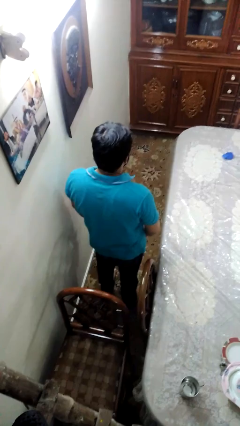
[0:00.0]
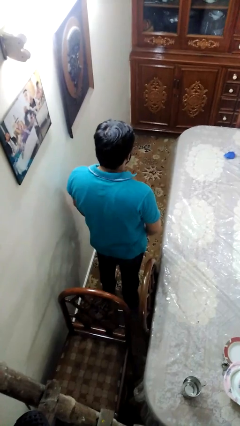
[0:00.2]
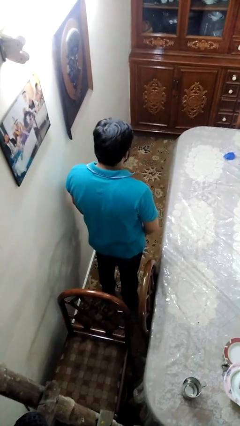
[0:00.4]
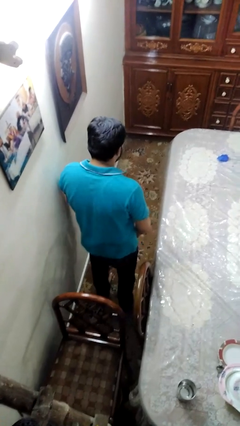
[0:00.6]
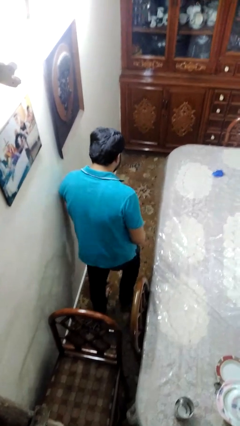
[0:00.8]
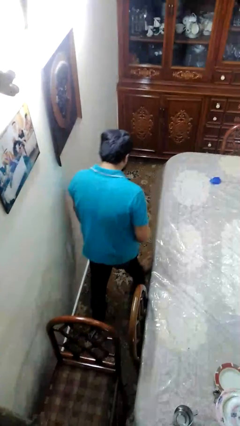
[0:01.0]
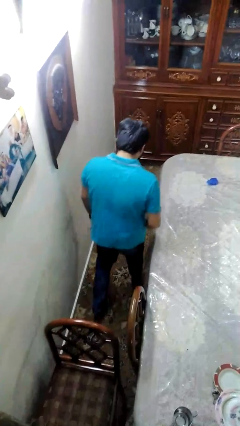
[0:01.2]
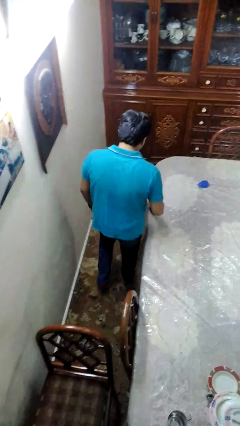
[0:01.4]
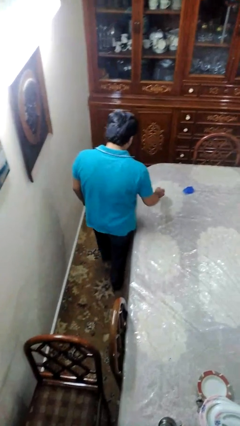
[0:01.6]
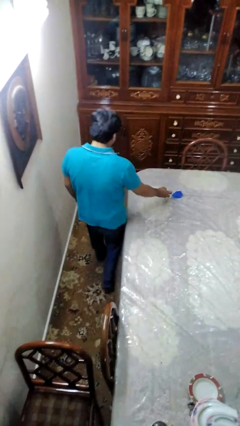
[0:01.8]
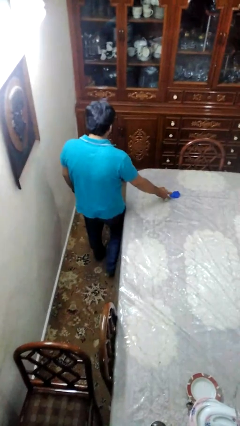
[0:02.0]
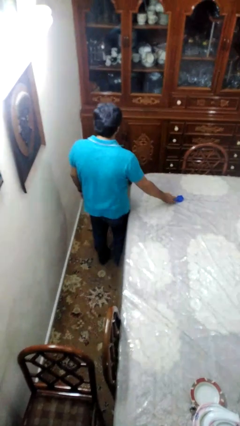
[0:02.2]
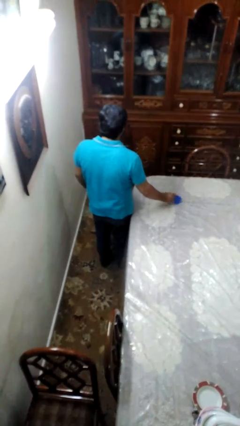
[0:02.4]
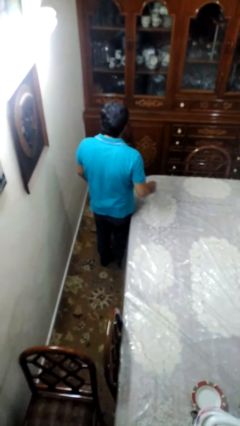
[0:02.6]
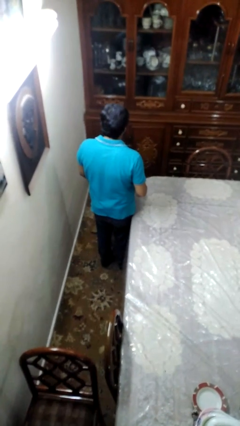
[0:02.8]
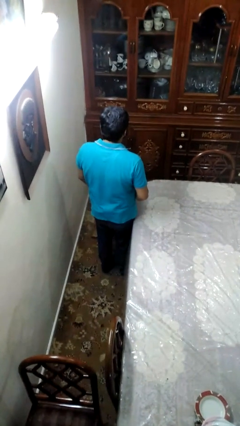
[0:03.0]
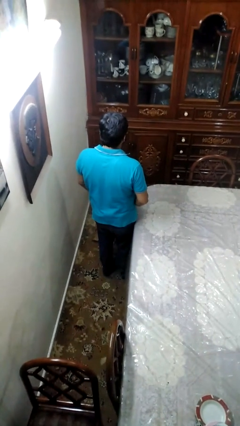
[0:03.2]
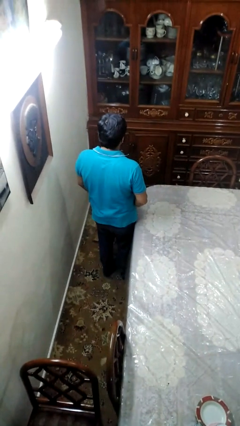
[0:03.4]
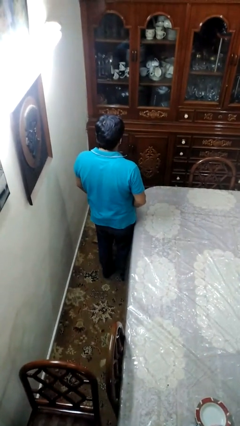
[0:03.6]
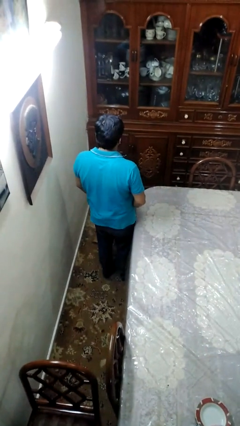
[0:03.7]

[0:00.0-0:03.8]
person picks up object from table

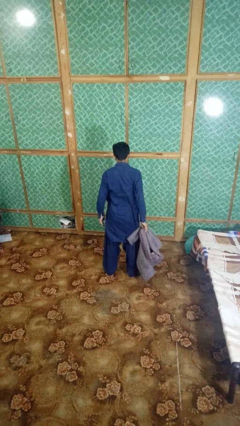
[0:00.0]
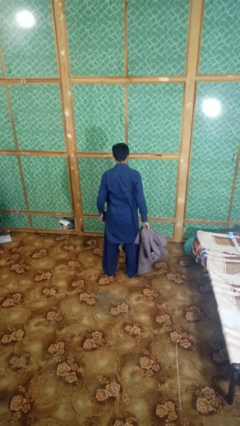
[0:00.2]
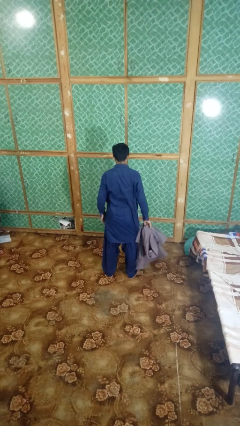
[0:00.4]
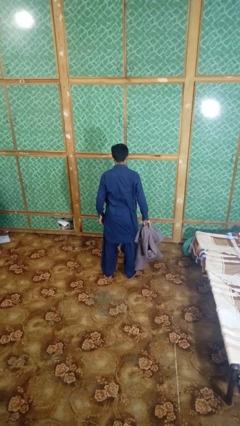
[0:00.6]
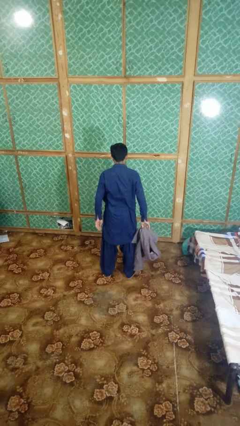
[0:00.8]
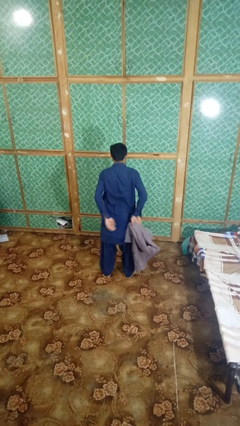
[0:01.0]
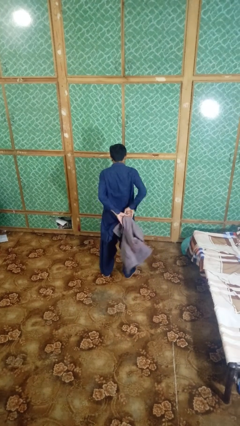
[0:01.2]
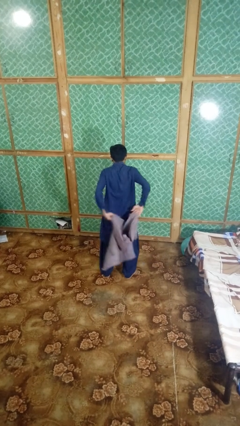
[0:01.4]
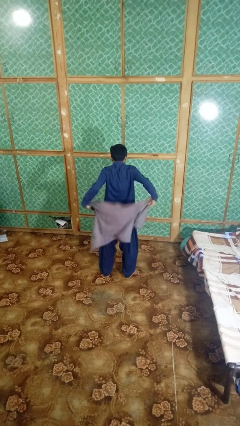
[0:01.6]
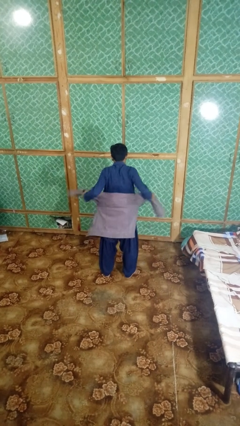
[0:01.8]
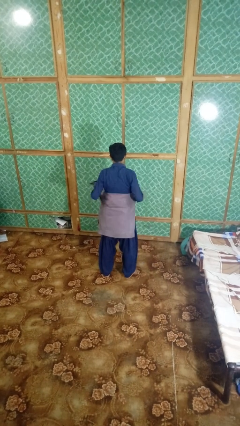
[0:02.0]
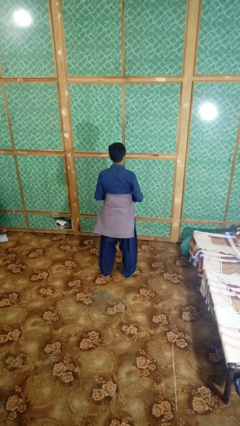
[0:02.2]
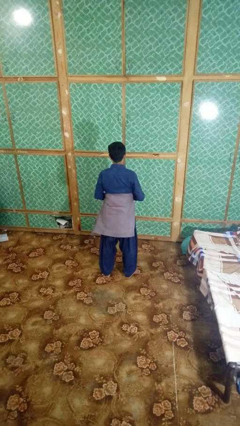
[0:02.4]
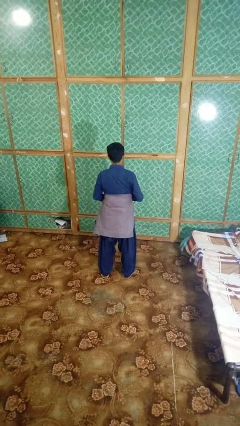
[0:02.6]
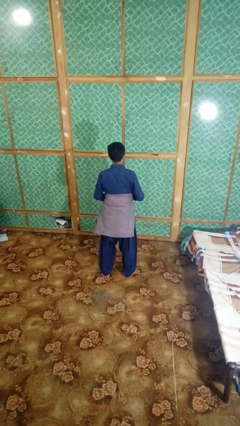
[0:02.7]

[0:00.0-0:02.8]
person ties jacket around waist

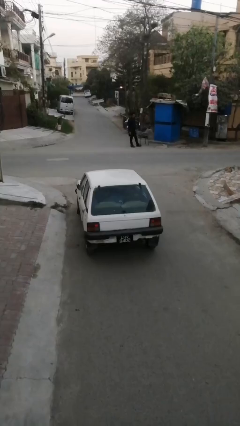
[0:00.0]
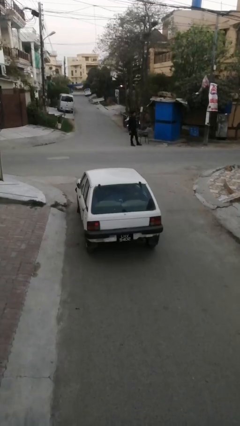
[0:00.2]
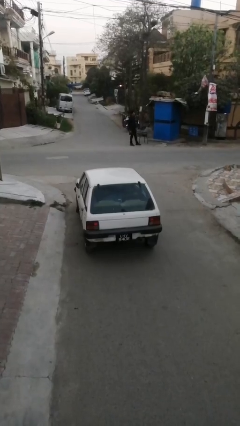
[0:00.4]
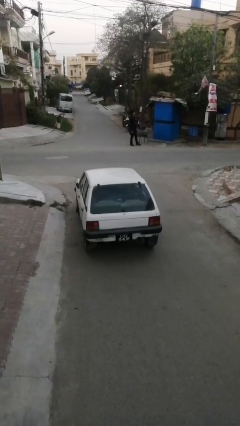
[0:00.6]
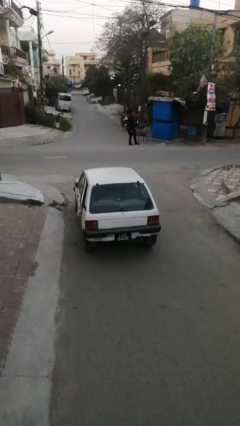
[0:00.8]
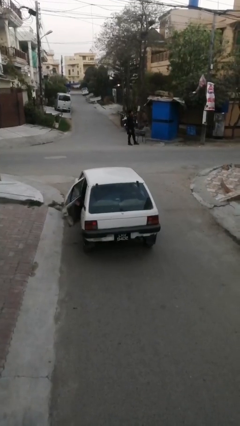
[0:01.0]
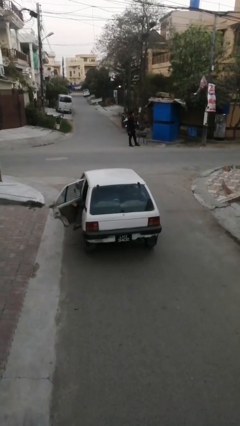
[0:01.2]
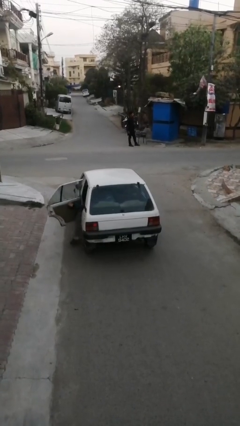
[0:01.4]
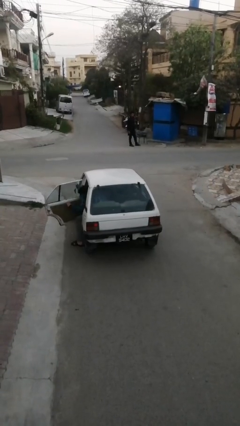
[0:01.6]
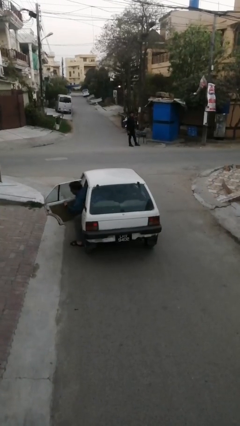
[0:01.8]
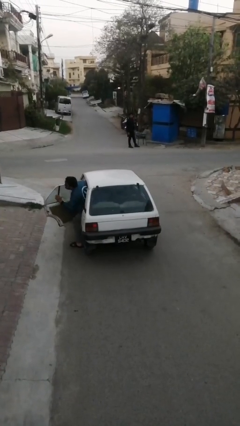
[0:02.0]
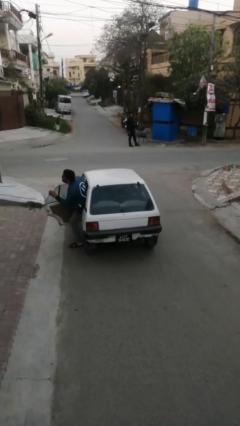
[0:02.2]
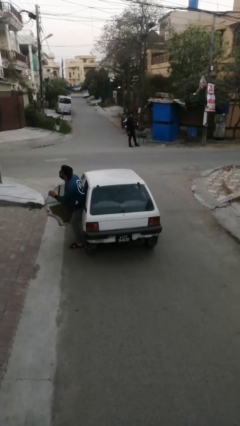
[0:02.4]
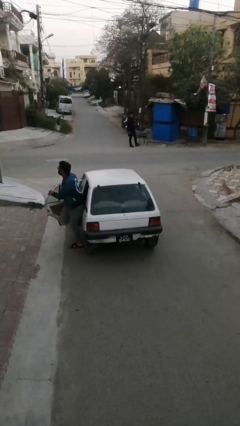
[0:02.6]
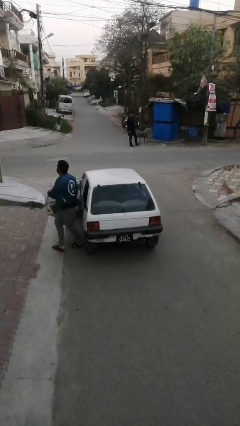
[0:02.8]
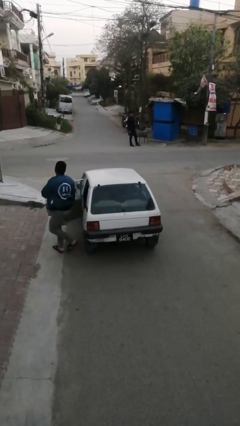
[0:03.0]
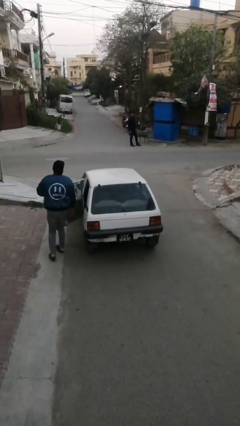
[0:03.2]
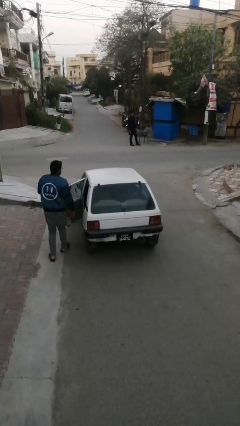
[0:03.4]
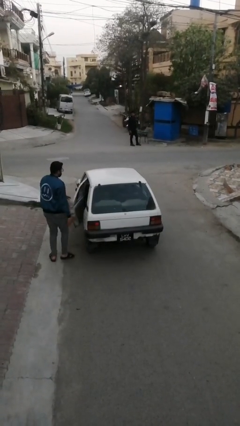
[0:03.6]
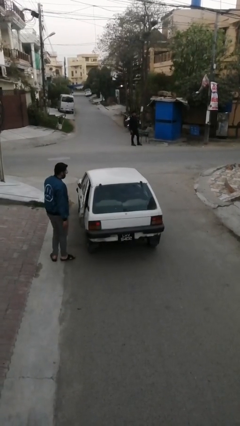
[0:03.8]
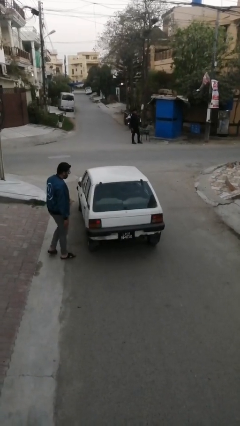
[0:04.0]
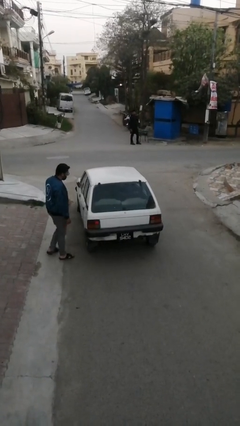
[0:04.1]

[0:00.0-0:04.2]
car drops off person

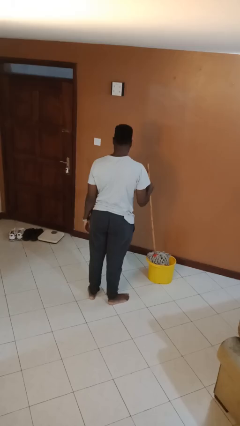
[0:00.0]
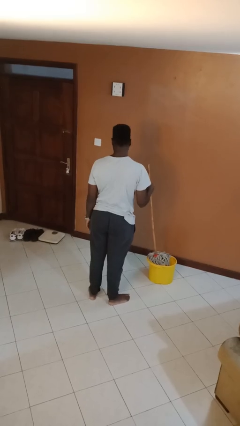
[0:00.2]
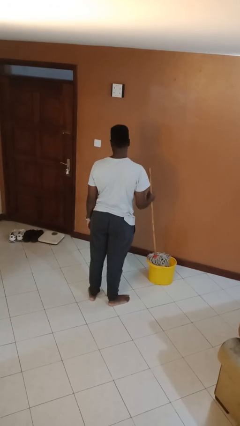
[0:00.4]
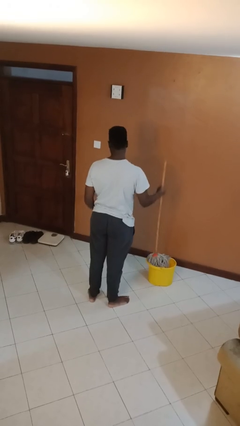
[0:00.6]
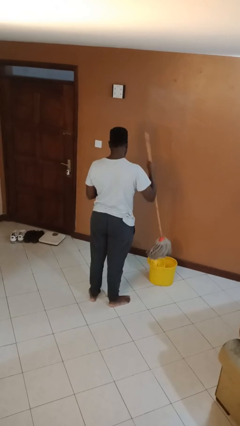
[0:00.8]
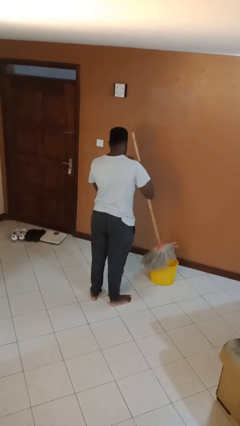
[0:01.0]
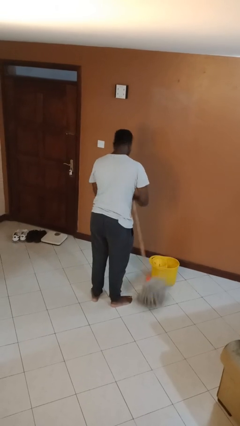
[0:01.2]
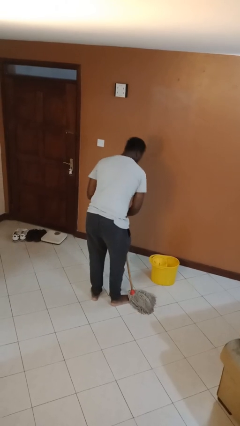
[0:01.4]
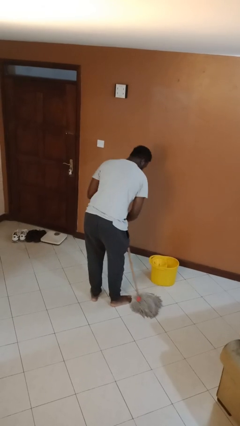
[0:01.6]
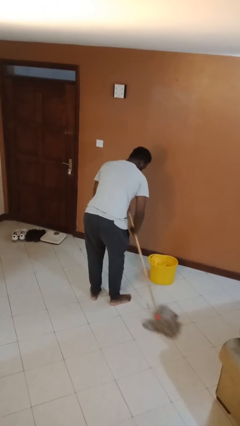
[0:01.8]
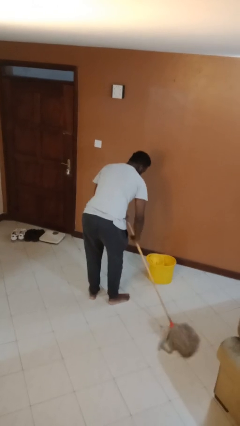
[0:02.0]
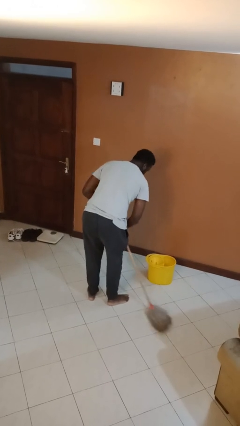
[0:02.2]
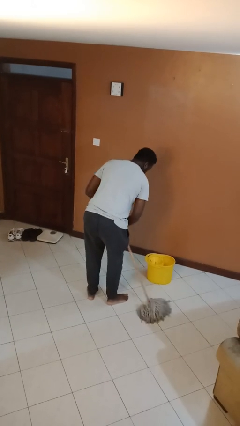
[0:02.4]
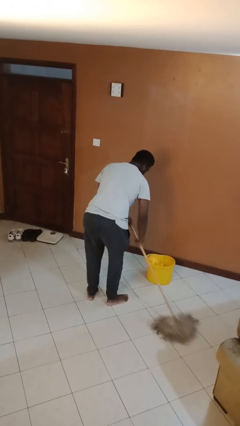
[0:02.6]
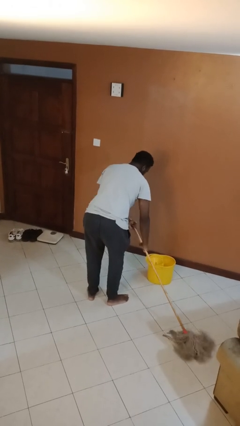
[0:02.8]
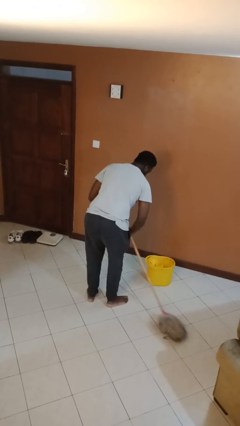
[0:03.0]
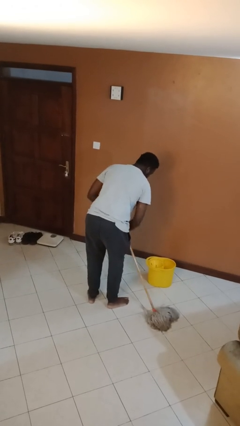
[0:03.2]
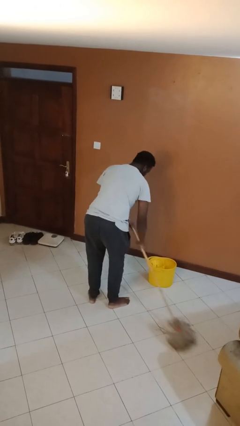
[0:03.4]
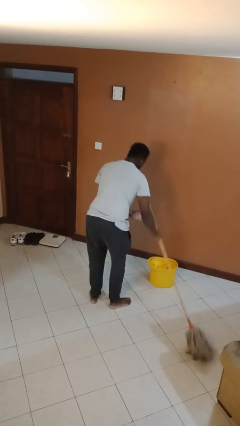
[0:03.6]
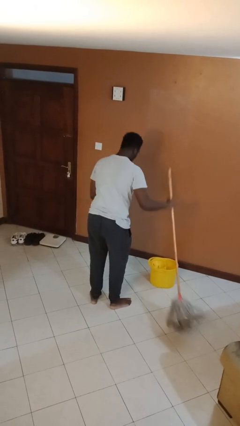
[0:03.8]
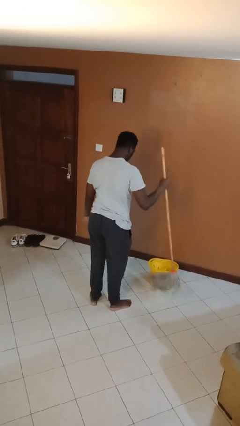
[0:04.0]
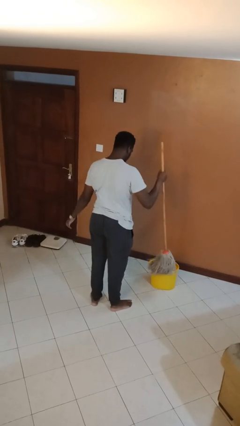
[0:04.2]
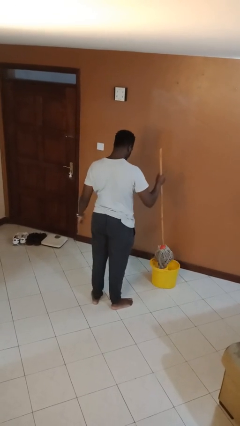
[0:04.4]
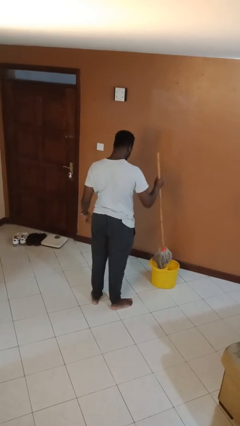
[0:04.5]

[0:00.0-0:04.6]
person mops

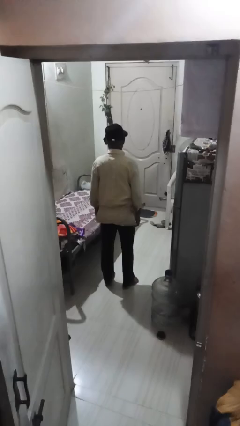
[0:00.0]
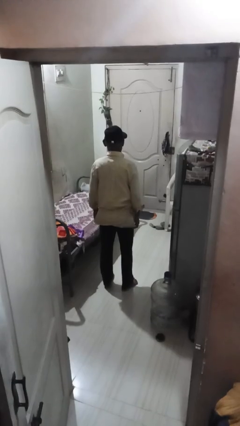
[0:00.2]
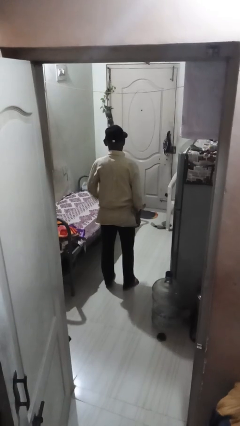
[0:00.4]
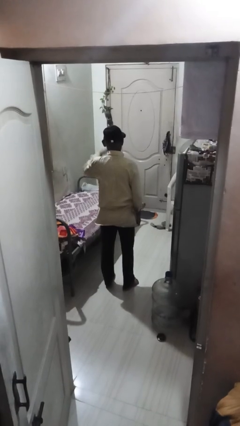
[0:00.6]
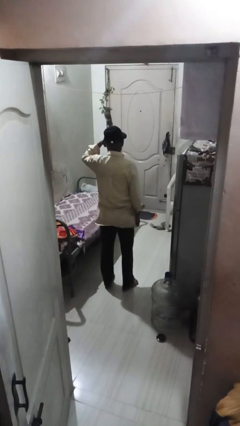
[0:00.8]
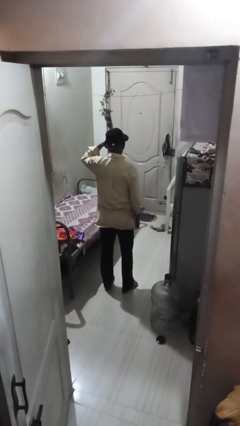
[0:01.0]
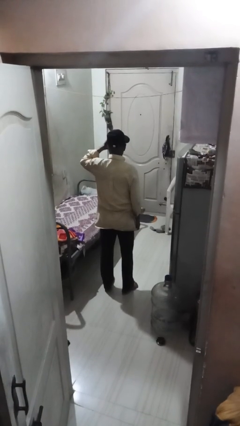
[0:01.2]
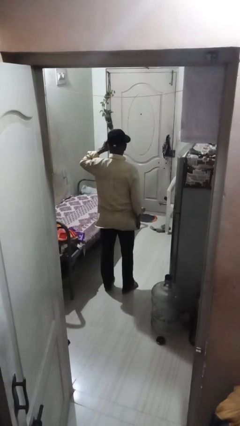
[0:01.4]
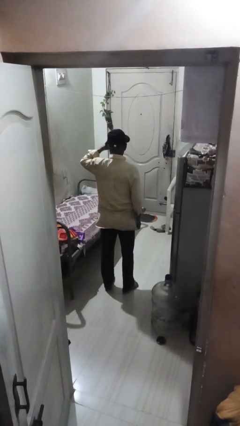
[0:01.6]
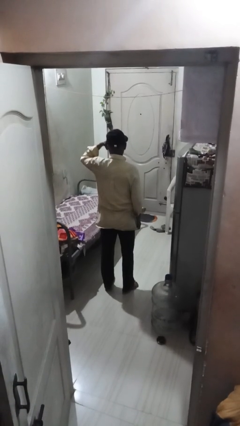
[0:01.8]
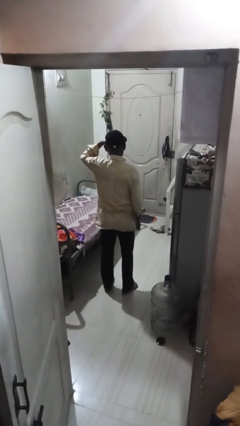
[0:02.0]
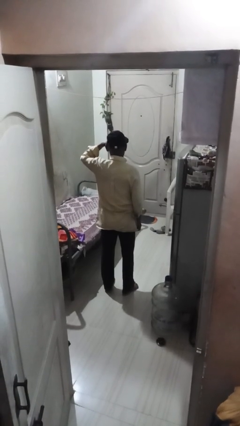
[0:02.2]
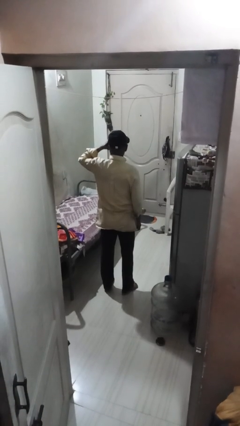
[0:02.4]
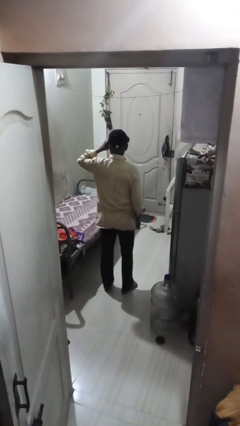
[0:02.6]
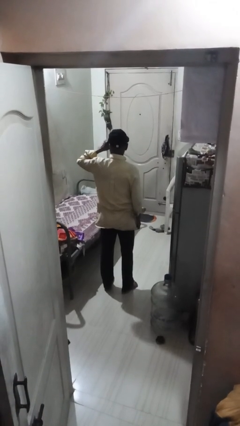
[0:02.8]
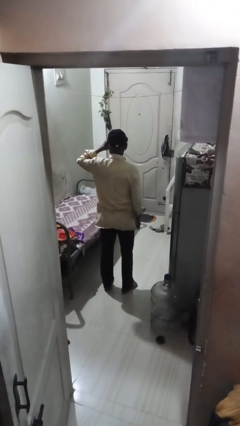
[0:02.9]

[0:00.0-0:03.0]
person rubs eyes
